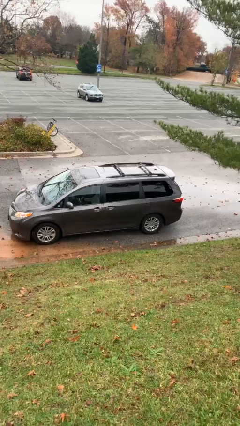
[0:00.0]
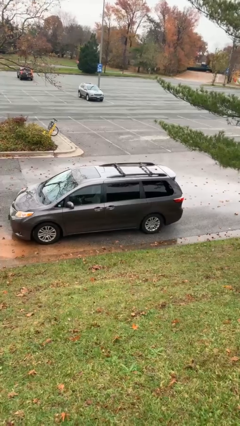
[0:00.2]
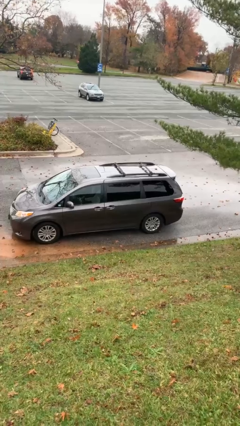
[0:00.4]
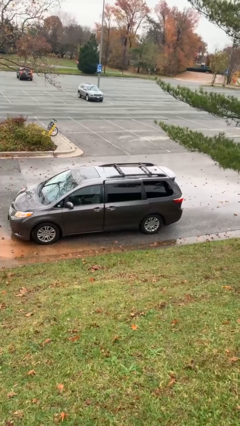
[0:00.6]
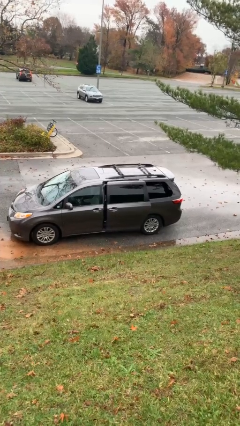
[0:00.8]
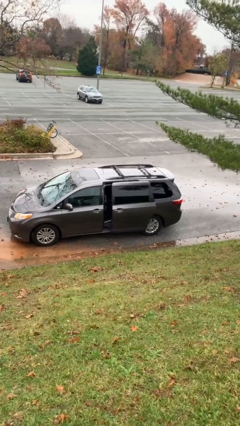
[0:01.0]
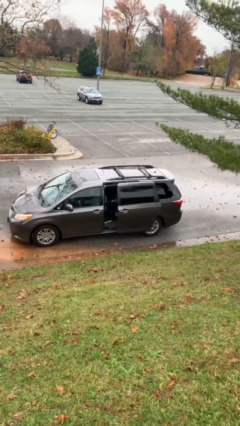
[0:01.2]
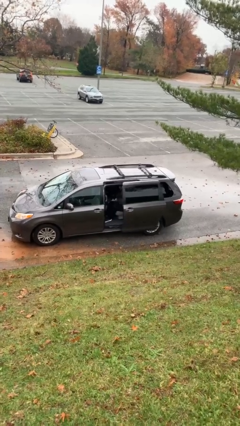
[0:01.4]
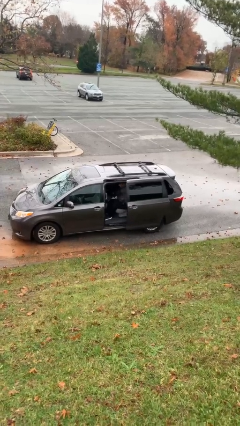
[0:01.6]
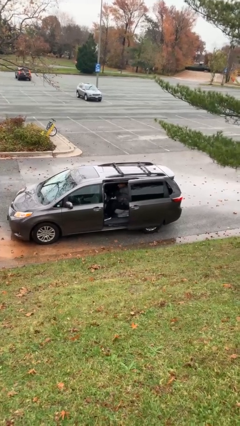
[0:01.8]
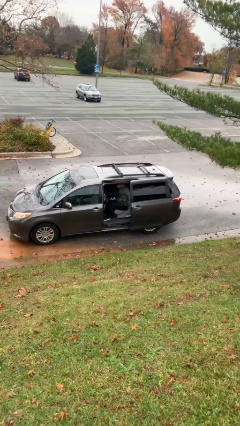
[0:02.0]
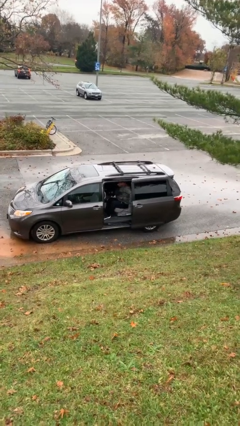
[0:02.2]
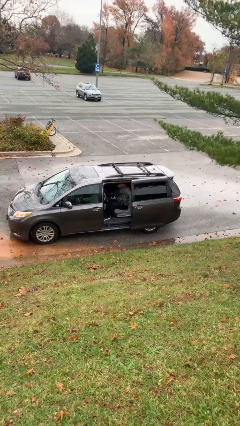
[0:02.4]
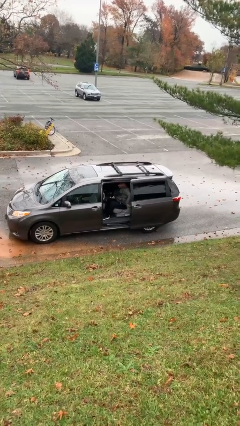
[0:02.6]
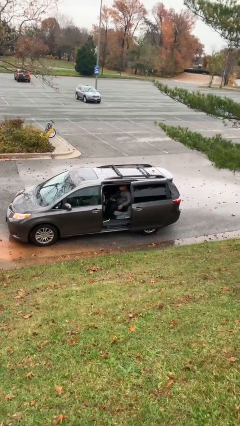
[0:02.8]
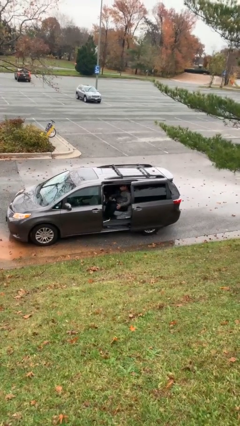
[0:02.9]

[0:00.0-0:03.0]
person opens car door

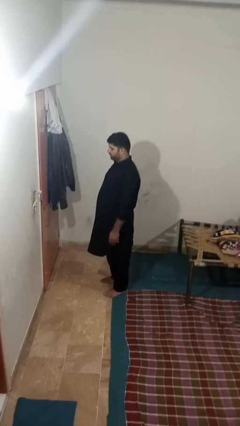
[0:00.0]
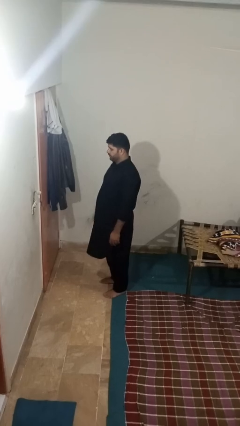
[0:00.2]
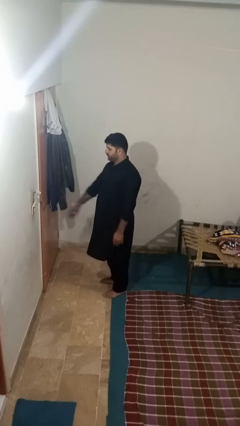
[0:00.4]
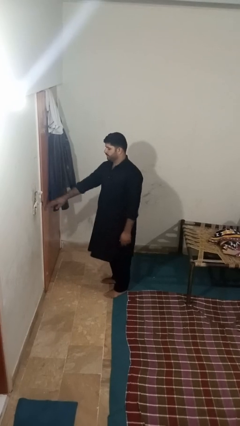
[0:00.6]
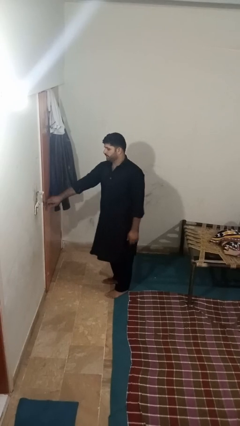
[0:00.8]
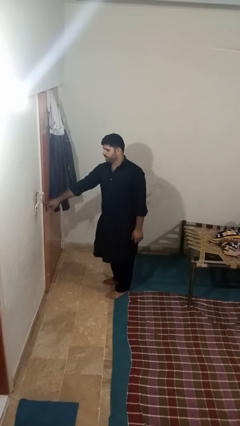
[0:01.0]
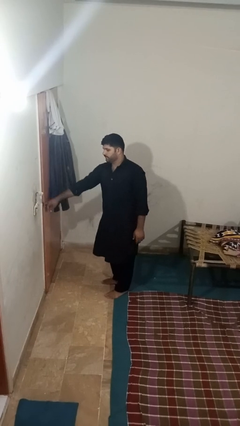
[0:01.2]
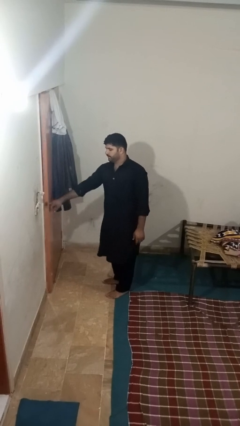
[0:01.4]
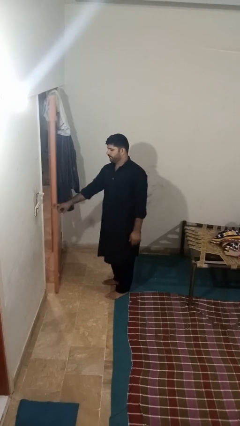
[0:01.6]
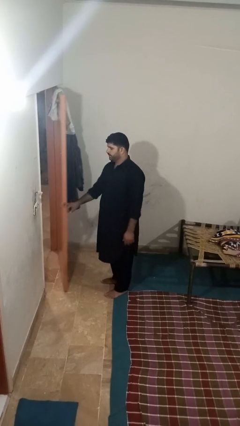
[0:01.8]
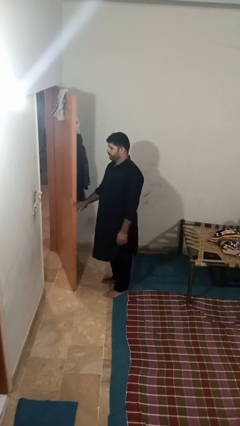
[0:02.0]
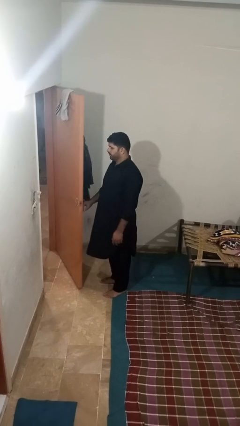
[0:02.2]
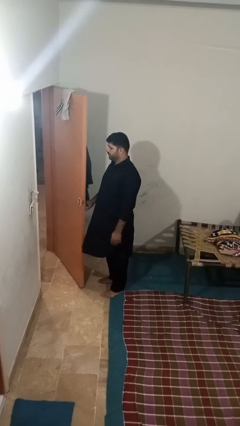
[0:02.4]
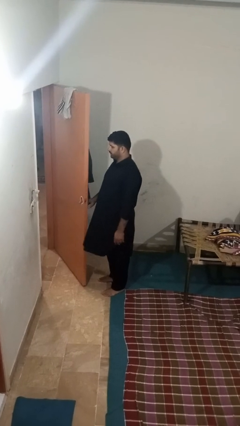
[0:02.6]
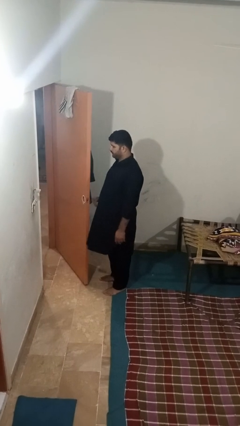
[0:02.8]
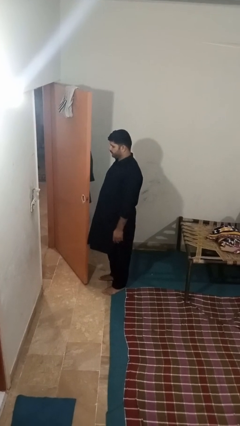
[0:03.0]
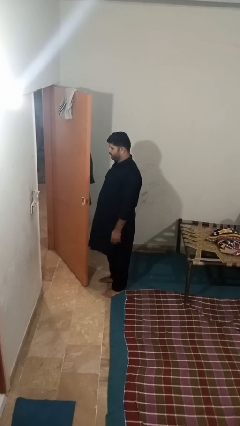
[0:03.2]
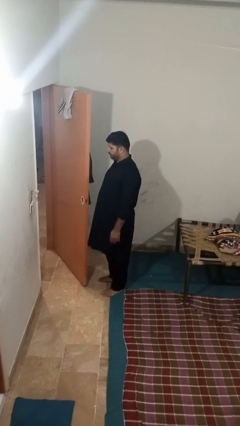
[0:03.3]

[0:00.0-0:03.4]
person opens facility door

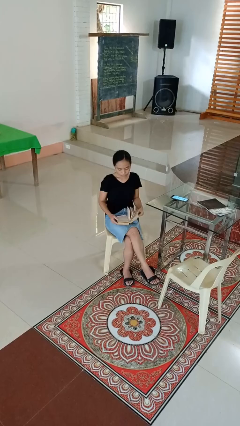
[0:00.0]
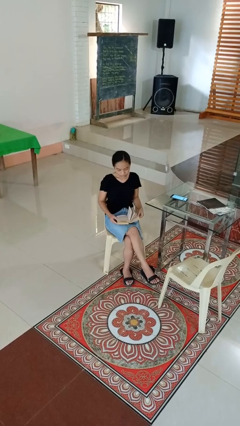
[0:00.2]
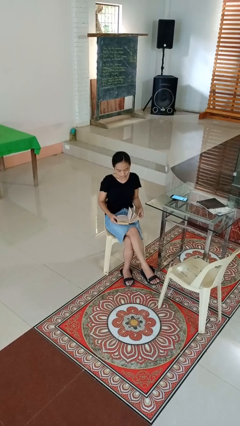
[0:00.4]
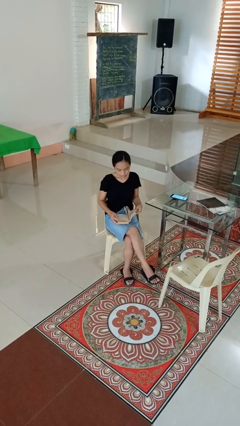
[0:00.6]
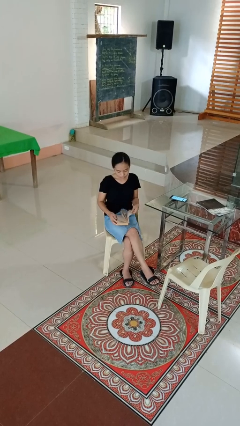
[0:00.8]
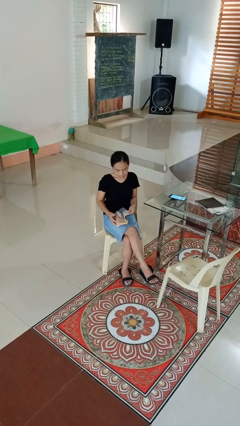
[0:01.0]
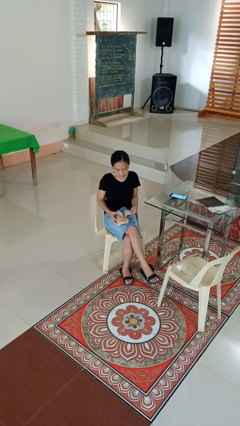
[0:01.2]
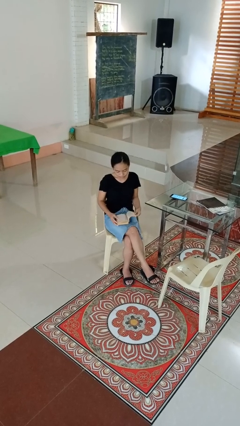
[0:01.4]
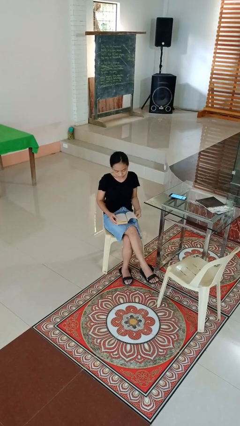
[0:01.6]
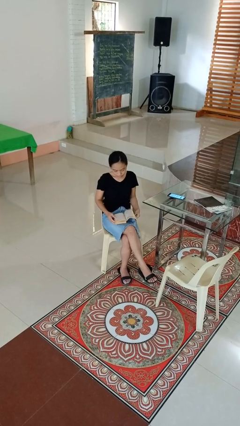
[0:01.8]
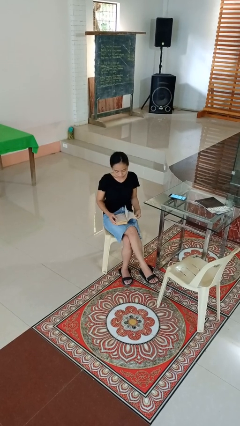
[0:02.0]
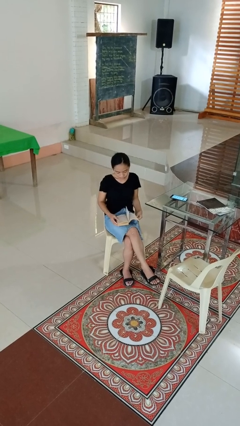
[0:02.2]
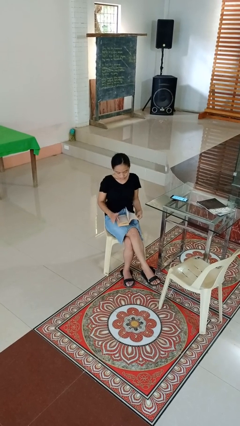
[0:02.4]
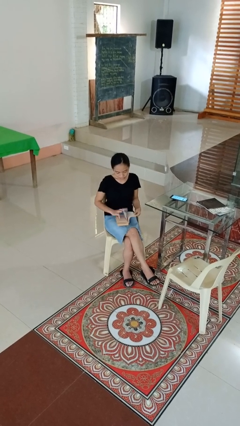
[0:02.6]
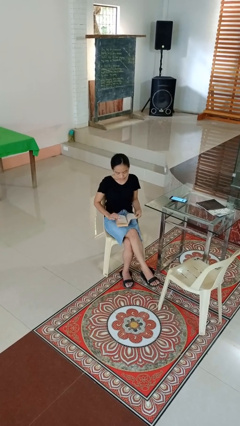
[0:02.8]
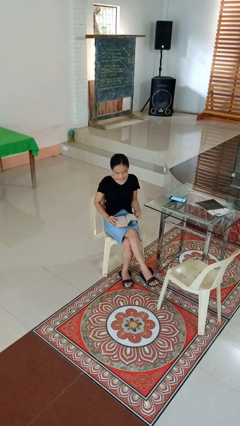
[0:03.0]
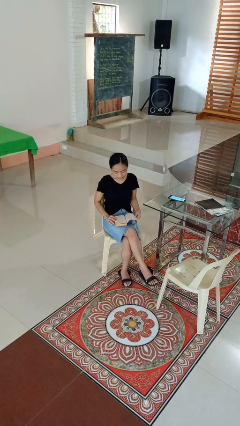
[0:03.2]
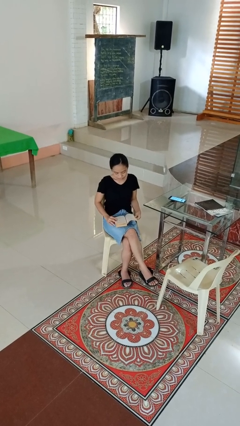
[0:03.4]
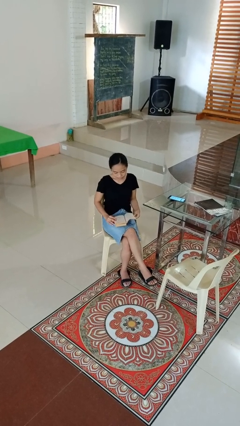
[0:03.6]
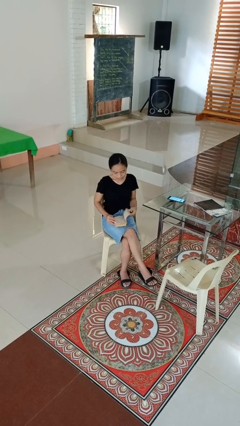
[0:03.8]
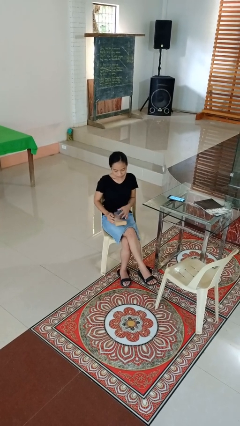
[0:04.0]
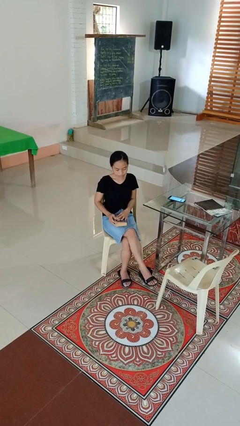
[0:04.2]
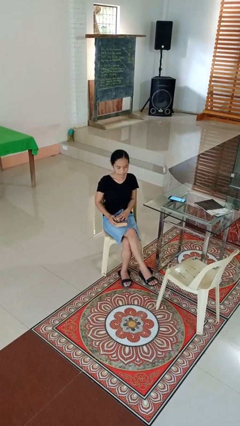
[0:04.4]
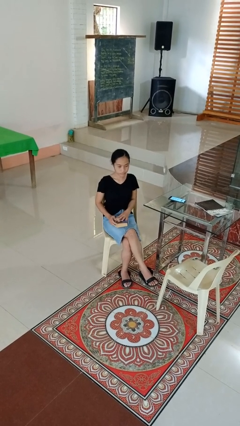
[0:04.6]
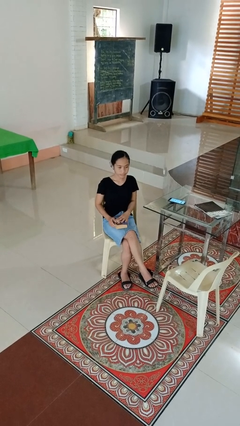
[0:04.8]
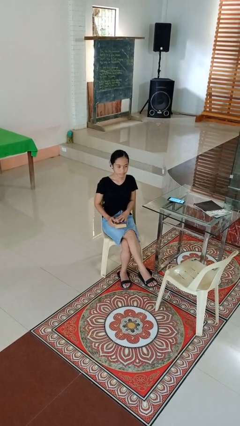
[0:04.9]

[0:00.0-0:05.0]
person reads book

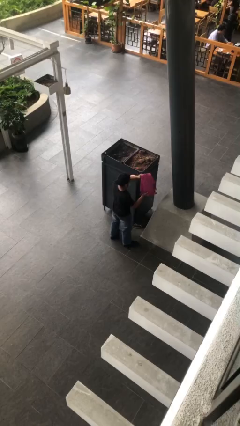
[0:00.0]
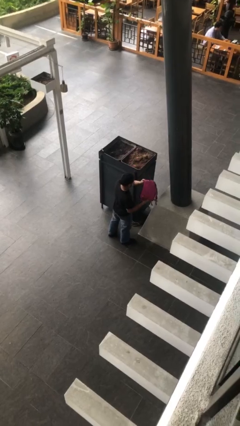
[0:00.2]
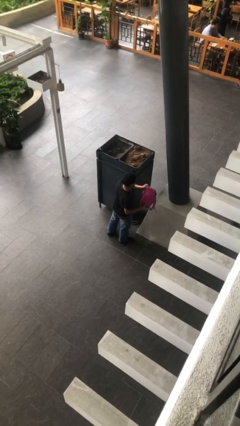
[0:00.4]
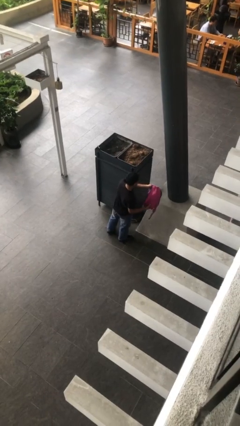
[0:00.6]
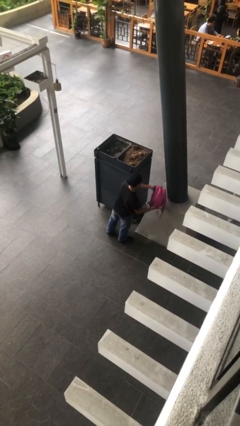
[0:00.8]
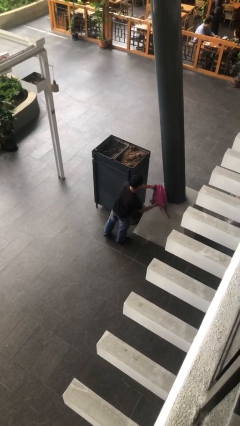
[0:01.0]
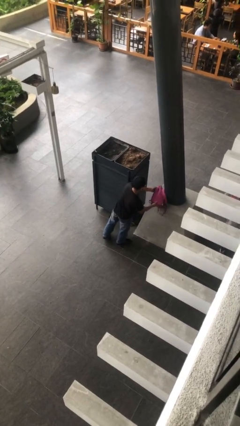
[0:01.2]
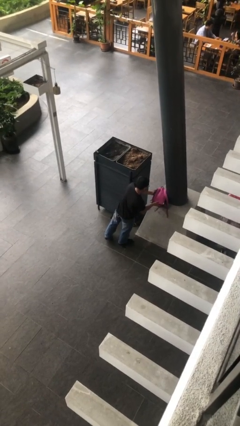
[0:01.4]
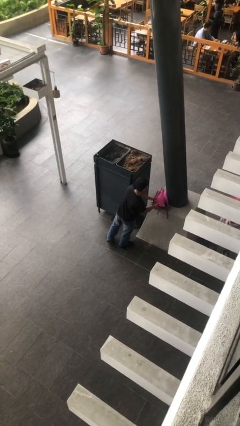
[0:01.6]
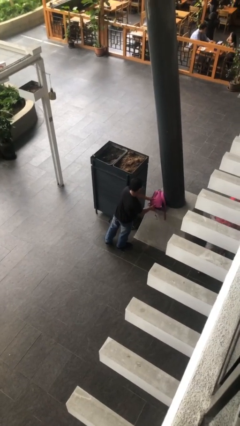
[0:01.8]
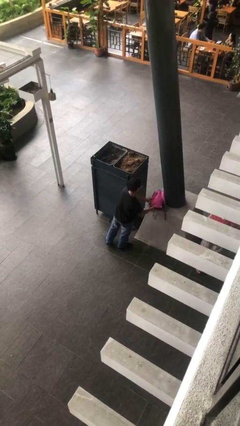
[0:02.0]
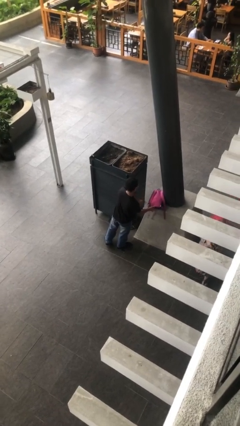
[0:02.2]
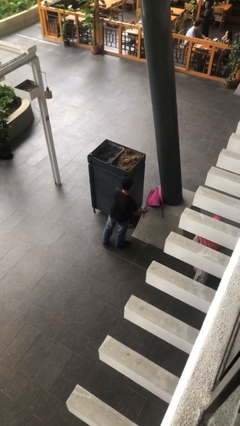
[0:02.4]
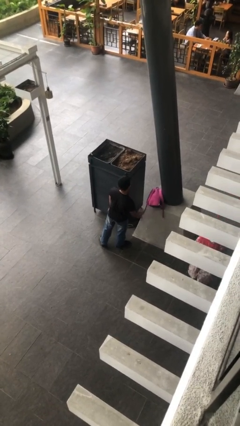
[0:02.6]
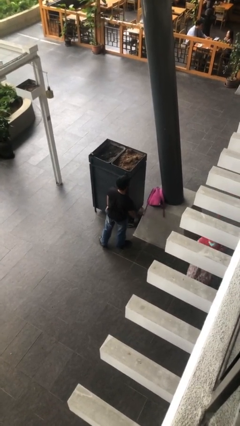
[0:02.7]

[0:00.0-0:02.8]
person puts down object on table

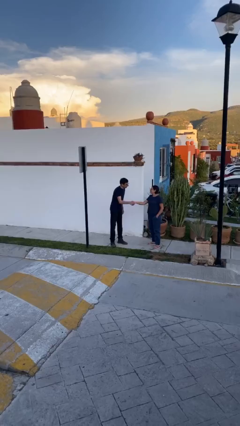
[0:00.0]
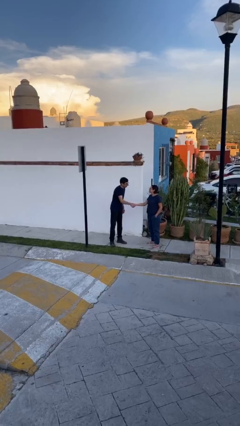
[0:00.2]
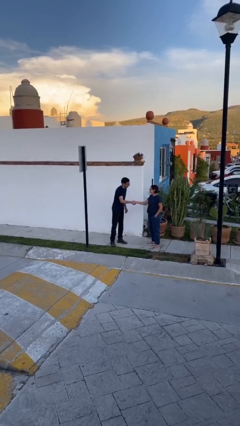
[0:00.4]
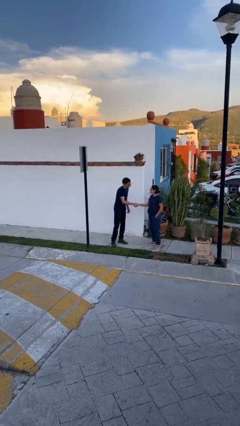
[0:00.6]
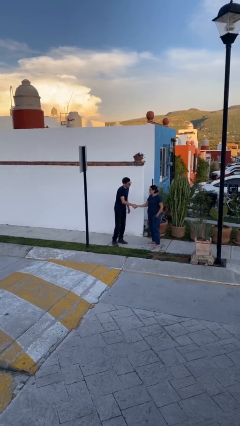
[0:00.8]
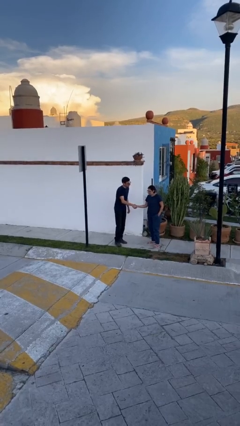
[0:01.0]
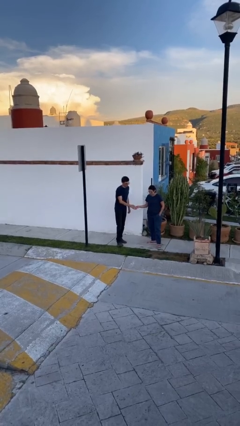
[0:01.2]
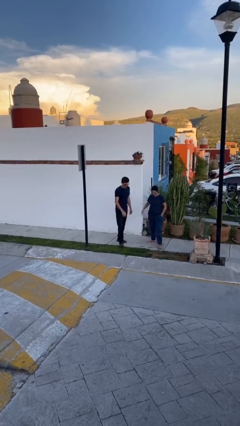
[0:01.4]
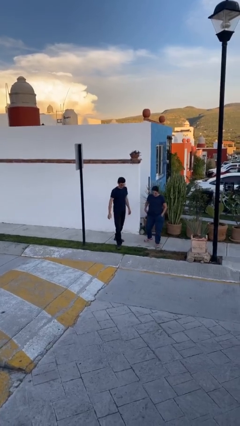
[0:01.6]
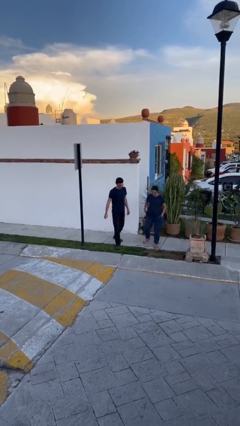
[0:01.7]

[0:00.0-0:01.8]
person shakes hand

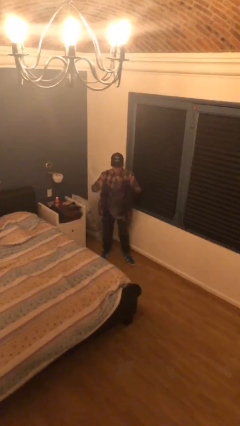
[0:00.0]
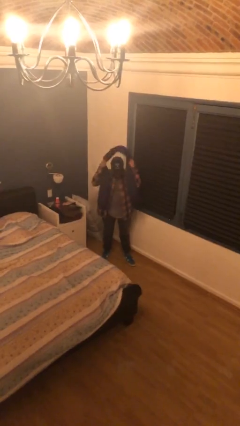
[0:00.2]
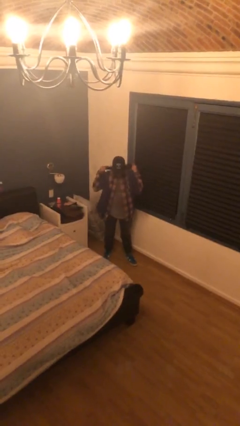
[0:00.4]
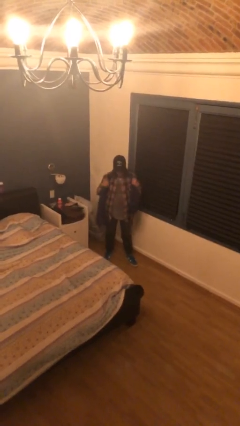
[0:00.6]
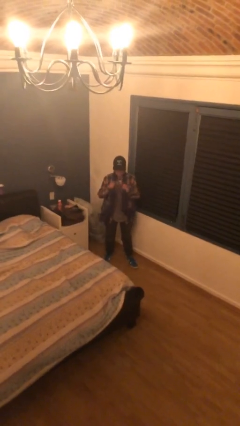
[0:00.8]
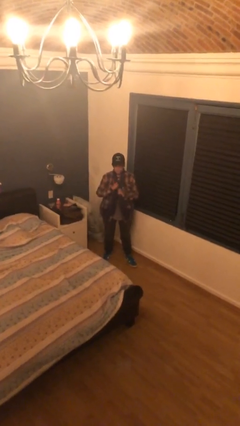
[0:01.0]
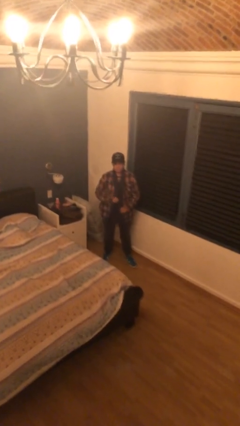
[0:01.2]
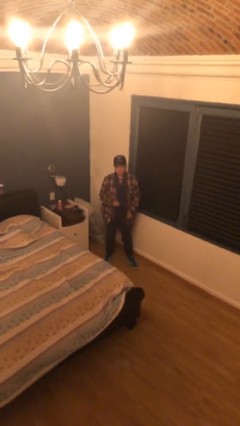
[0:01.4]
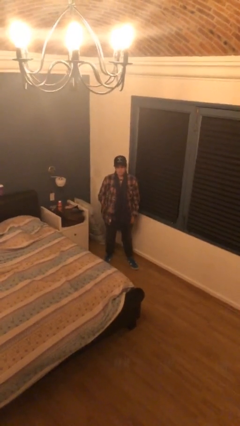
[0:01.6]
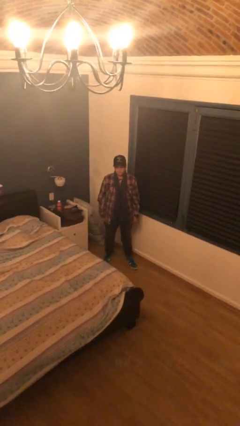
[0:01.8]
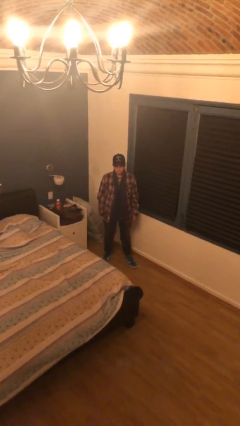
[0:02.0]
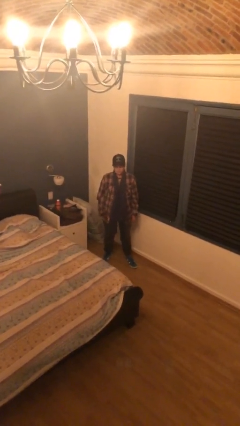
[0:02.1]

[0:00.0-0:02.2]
person puts on scarf
